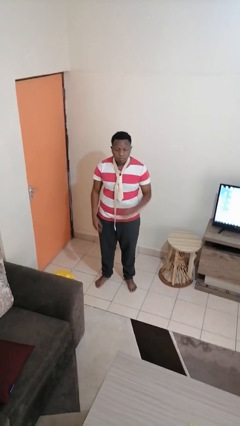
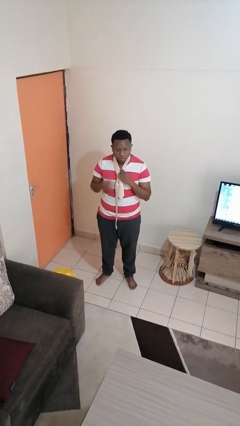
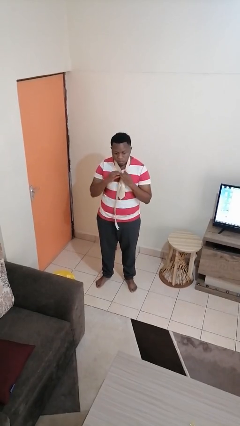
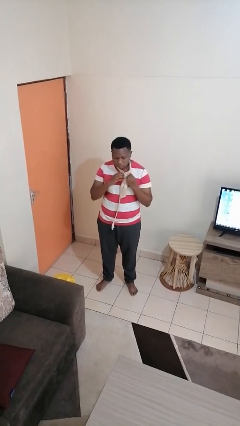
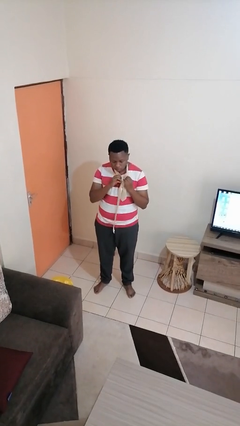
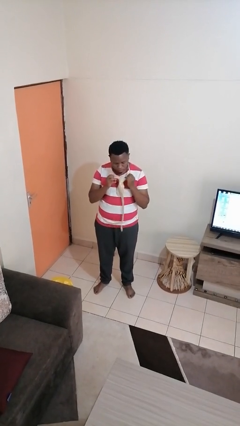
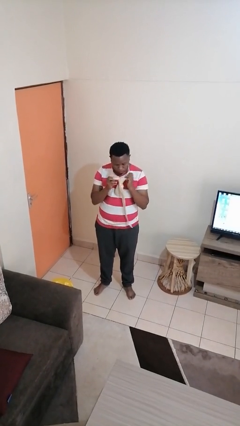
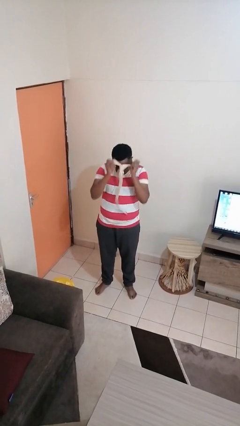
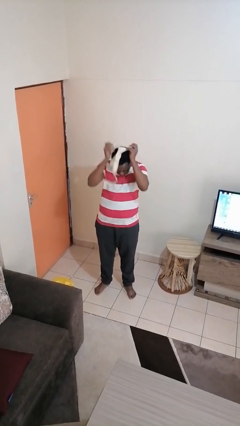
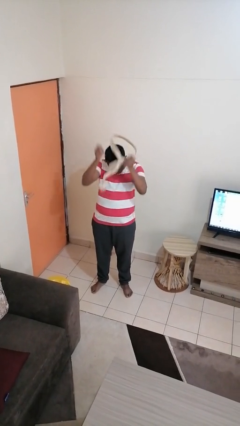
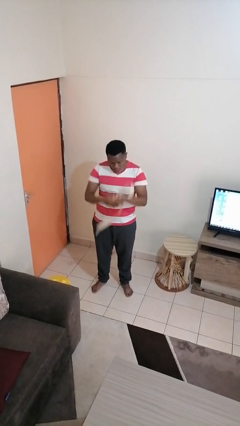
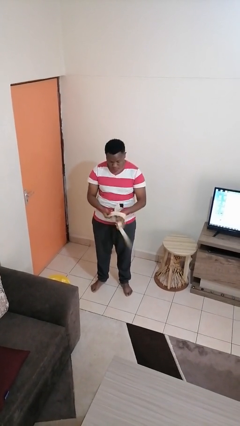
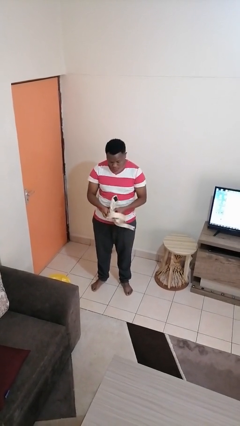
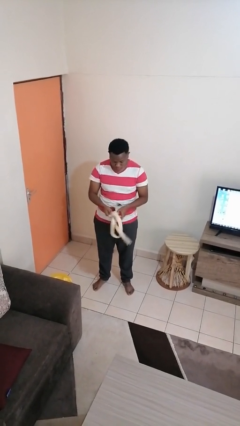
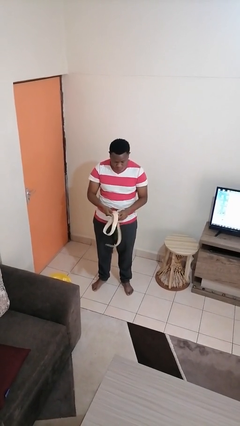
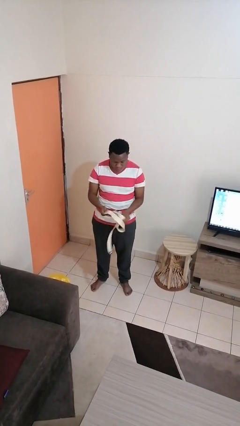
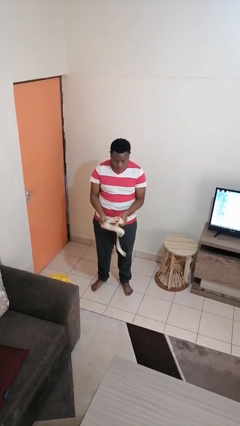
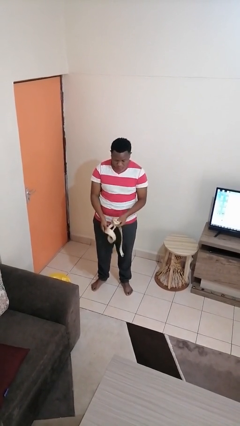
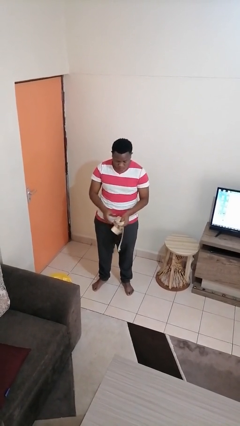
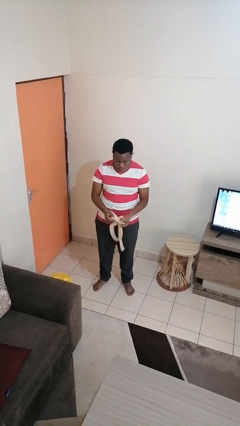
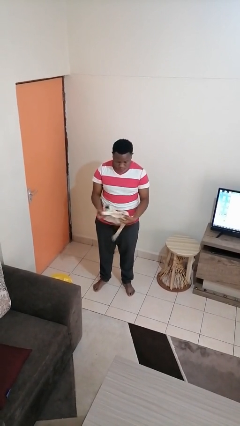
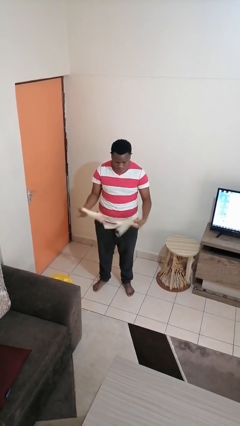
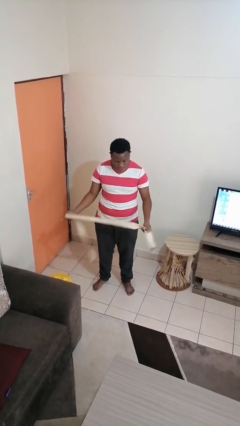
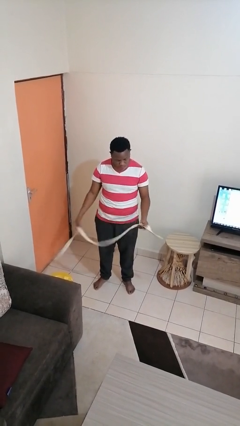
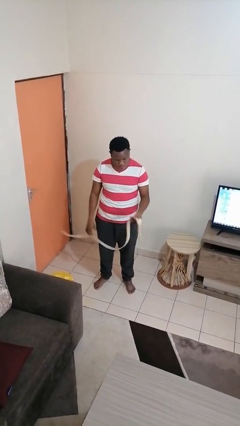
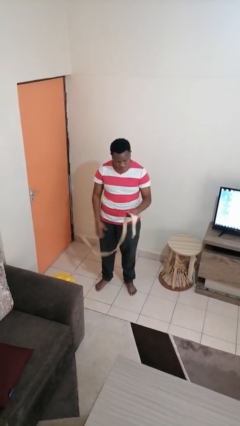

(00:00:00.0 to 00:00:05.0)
person takes off necktie

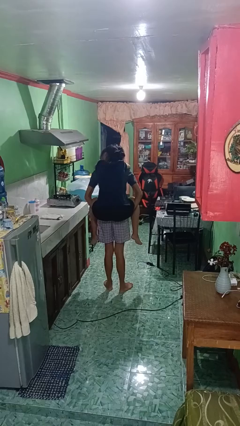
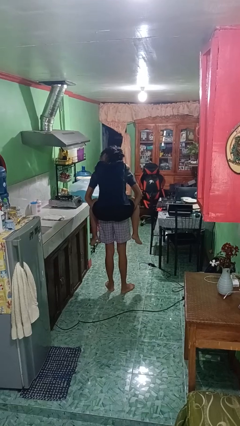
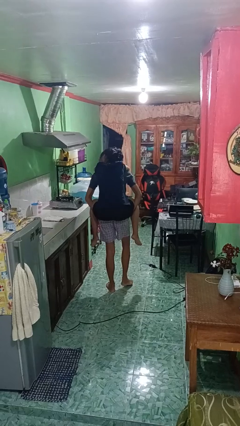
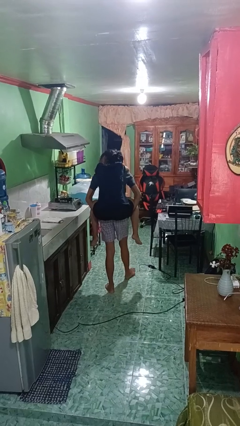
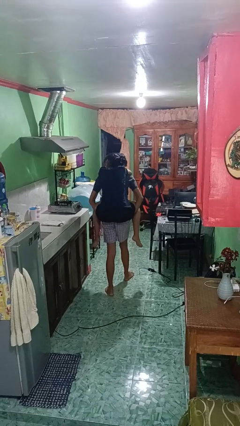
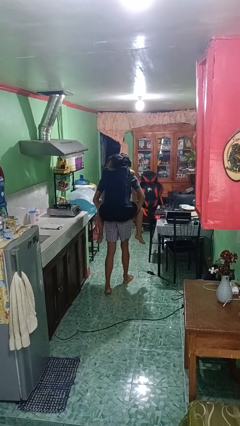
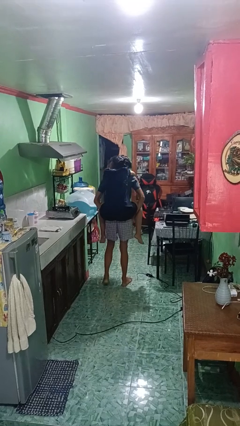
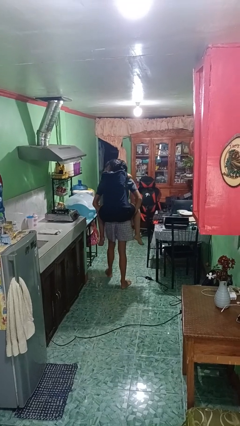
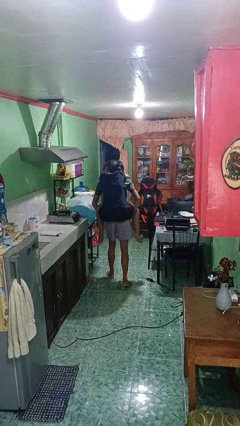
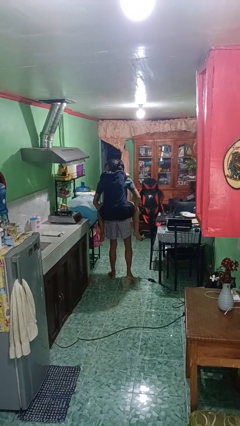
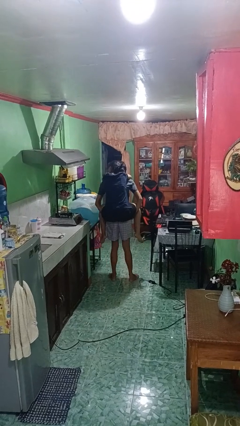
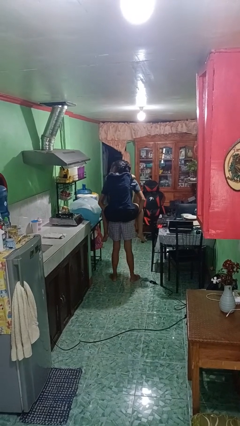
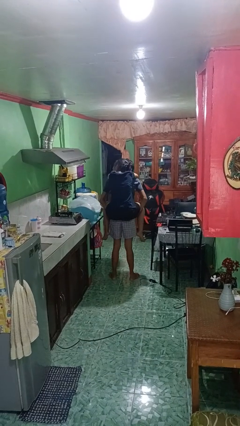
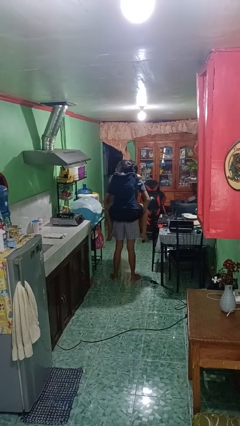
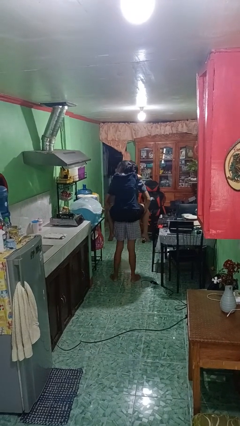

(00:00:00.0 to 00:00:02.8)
person carries person on back

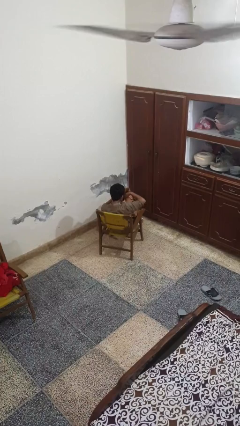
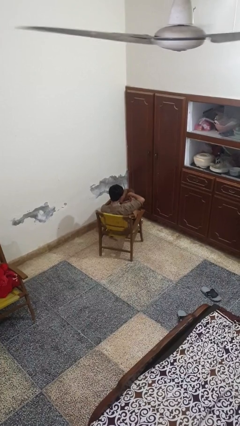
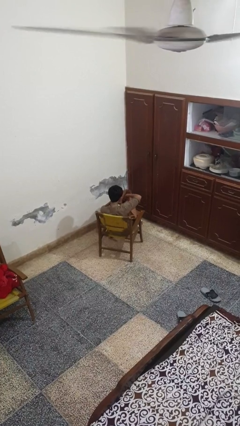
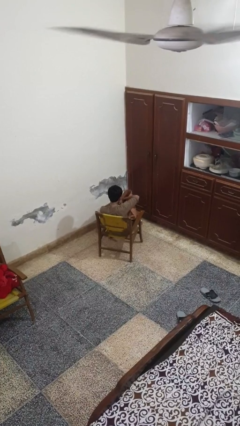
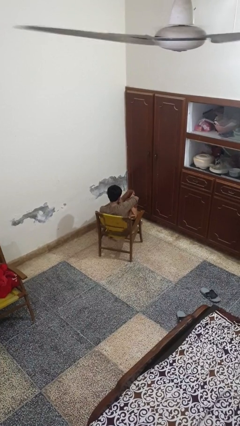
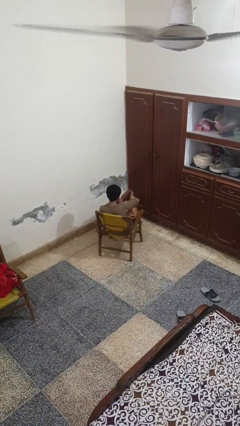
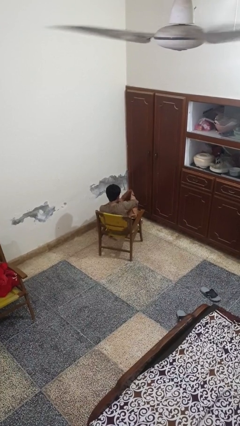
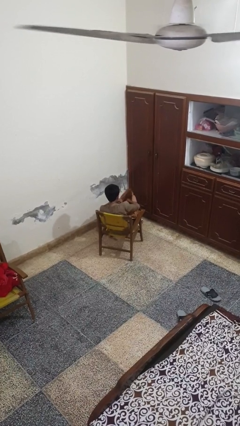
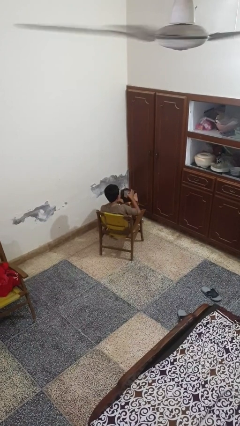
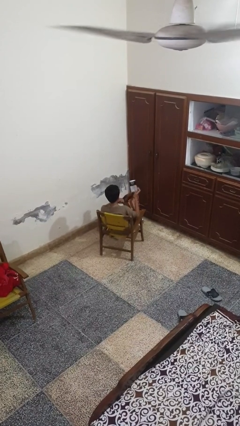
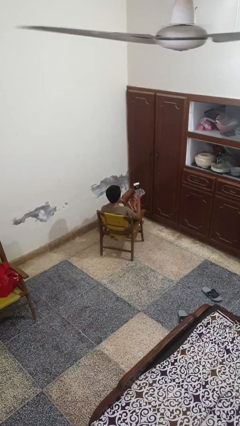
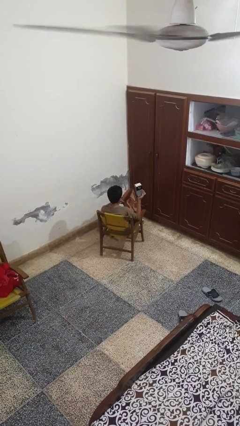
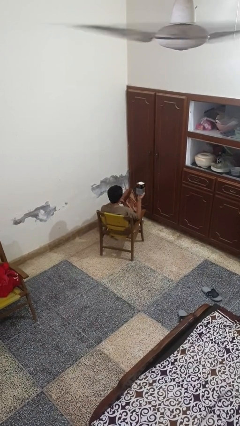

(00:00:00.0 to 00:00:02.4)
person takes object from bag

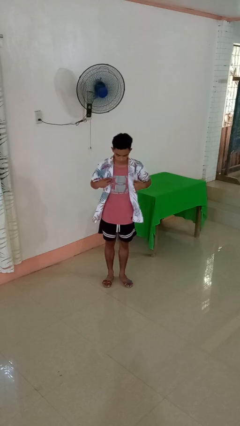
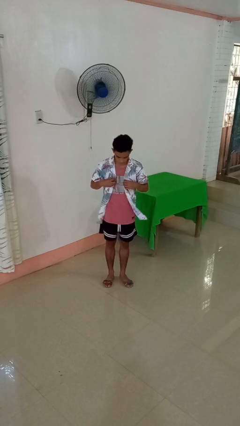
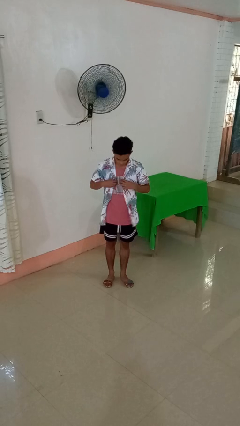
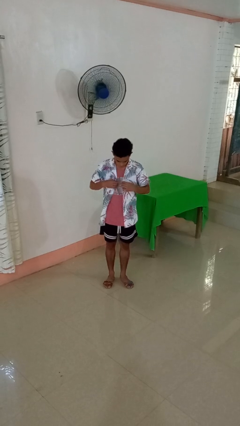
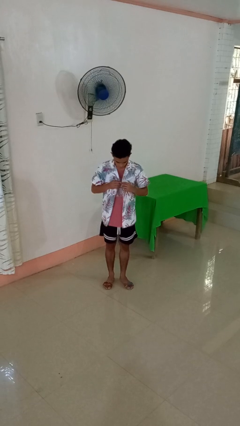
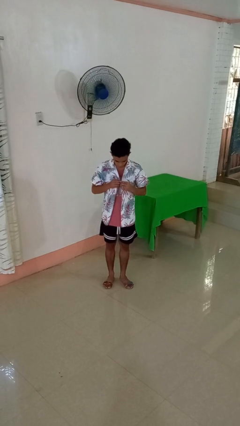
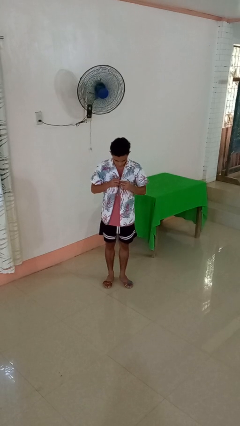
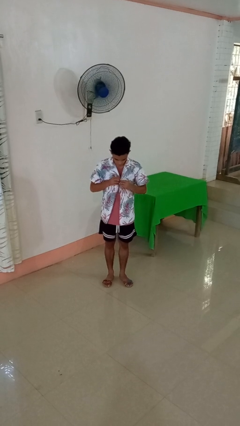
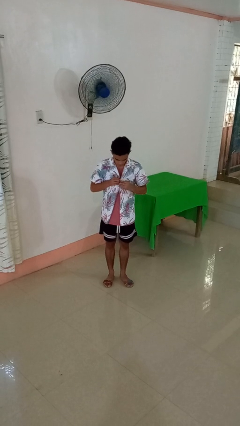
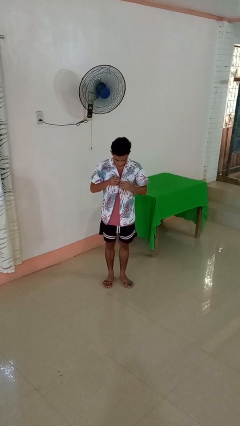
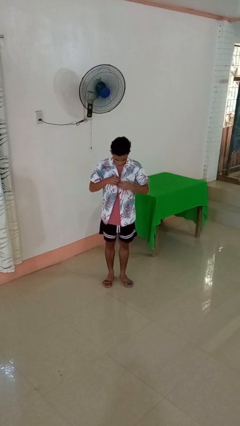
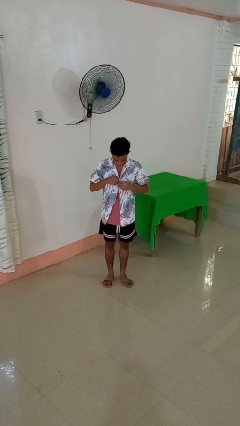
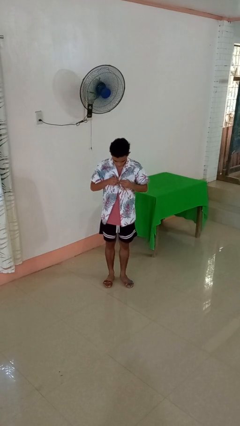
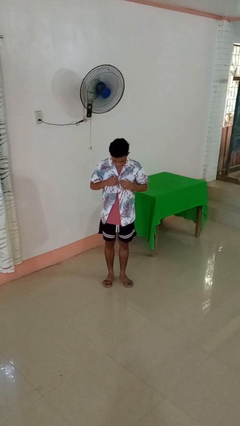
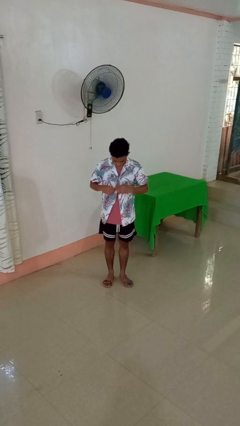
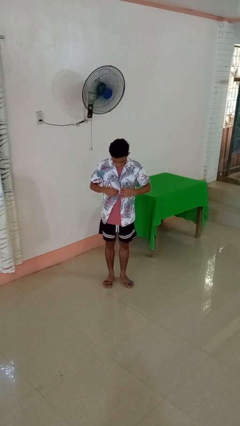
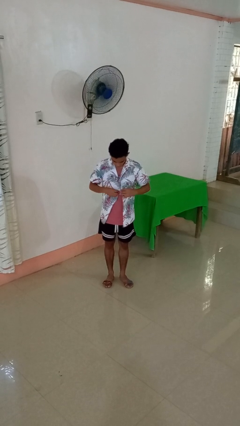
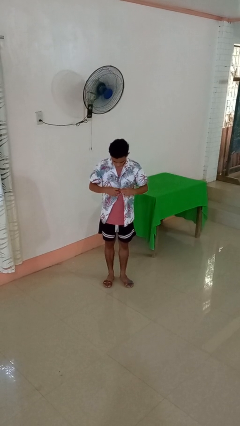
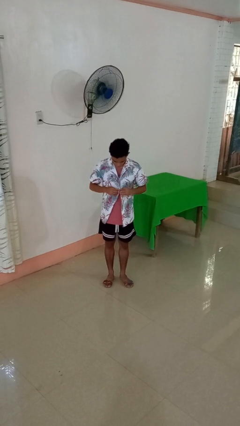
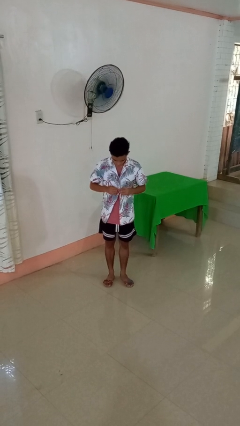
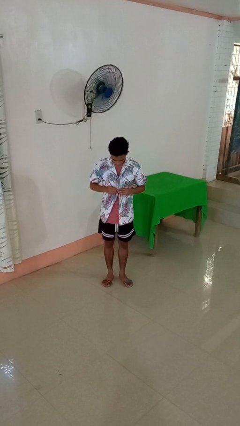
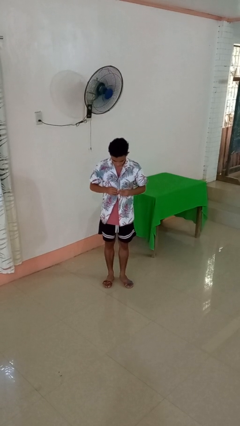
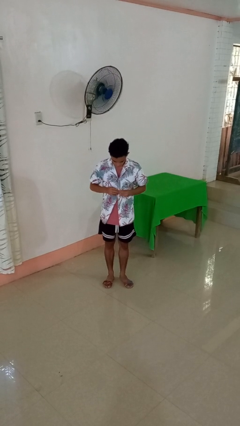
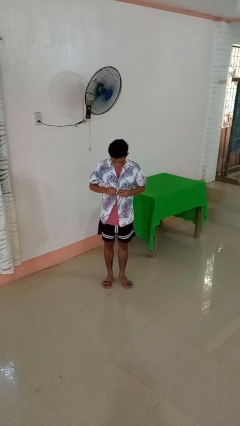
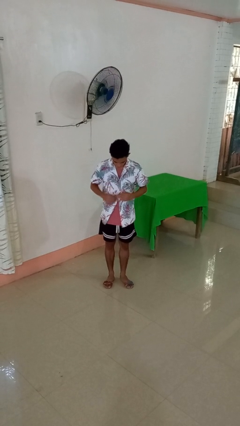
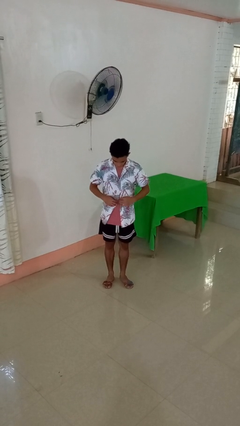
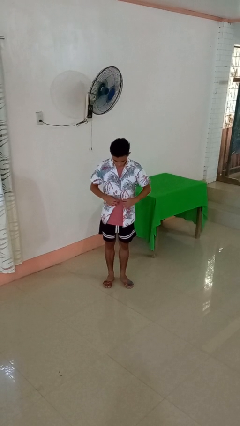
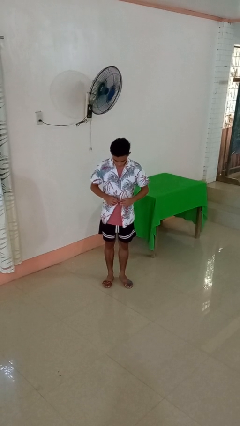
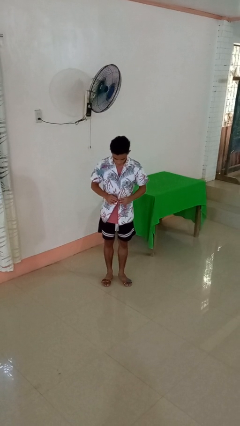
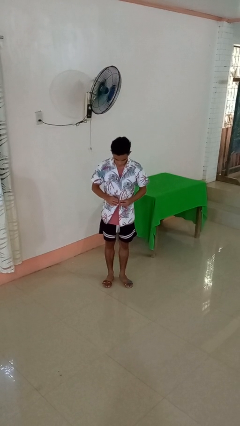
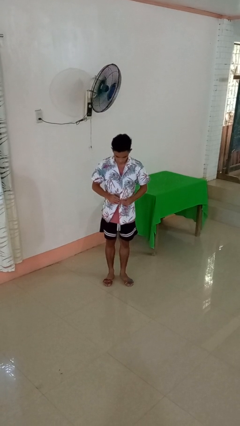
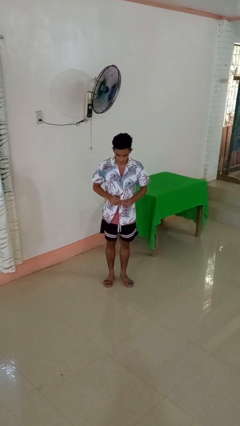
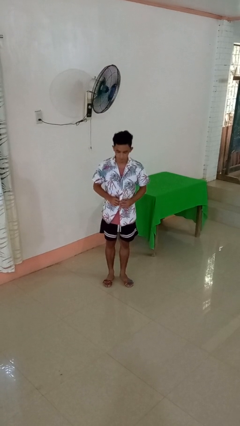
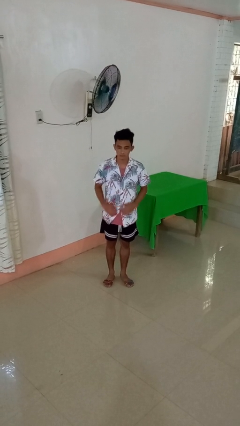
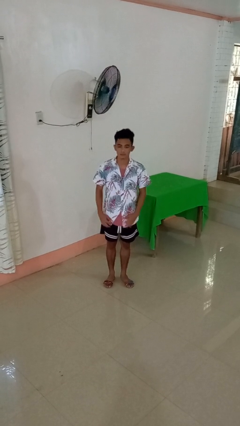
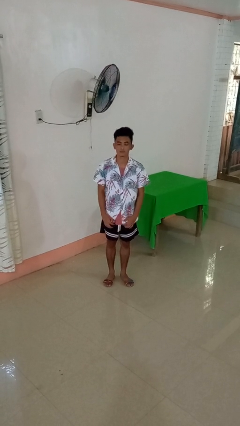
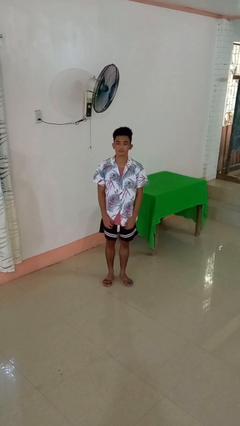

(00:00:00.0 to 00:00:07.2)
person buttons shirt
